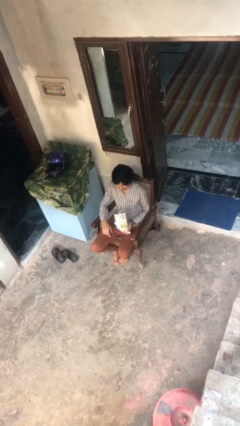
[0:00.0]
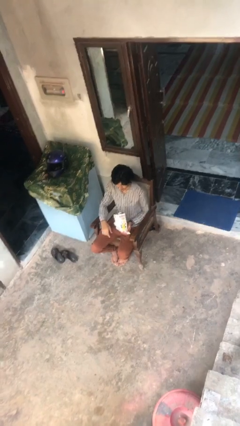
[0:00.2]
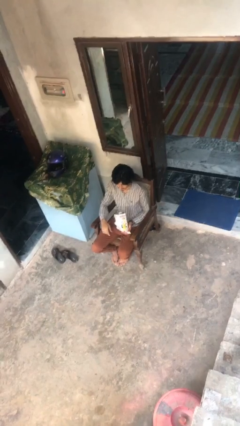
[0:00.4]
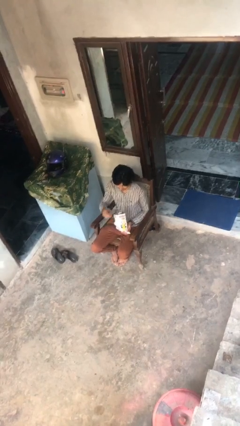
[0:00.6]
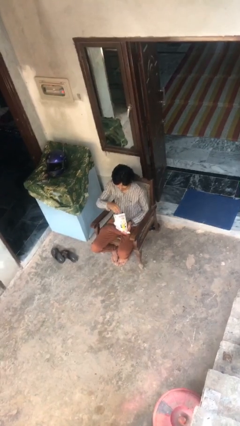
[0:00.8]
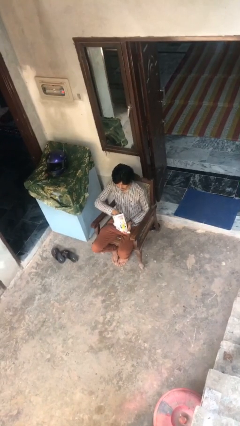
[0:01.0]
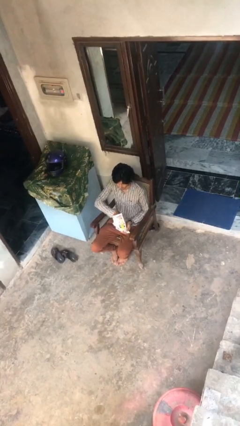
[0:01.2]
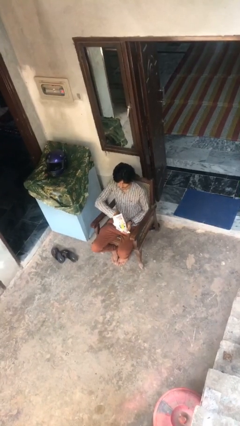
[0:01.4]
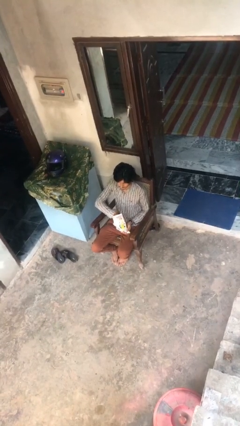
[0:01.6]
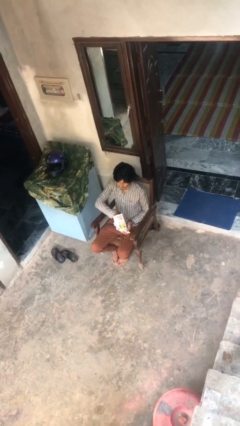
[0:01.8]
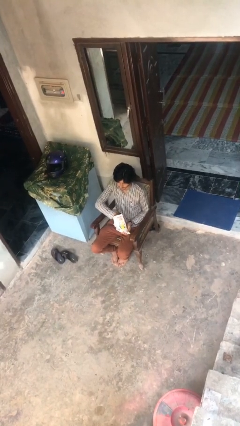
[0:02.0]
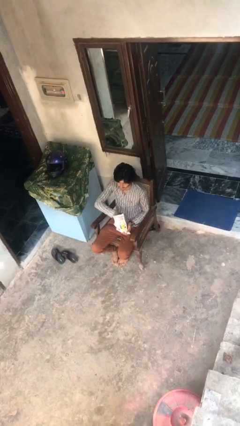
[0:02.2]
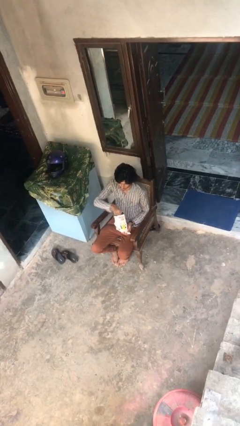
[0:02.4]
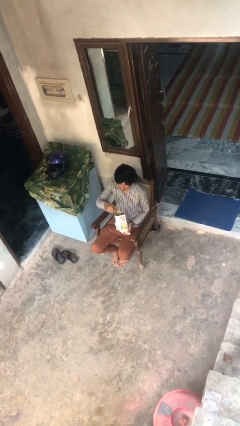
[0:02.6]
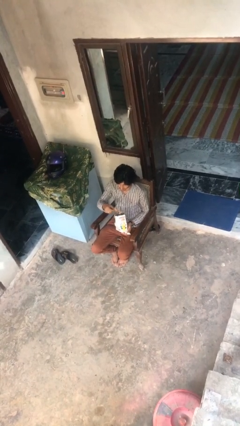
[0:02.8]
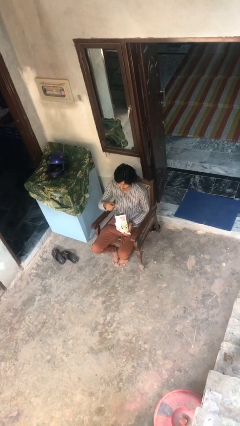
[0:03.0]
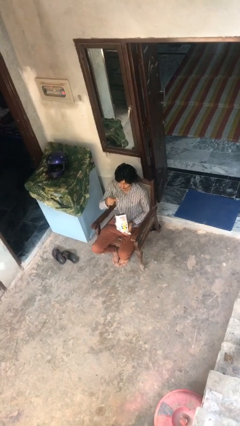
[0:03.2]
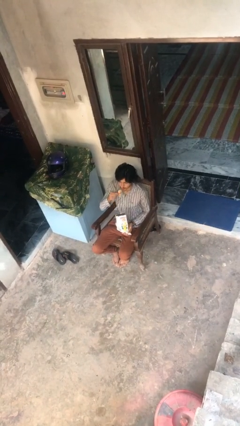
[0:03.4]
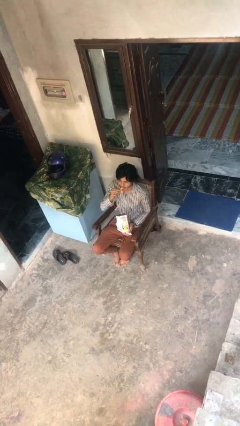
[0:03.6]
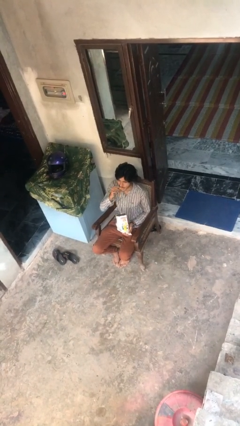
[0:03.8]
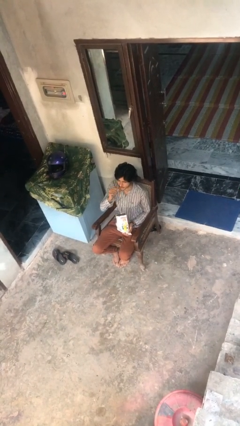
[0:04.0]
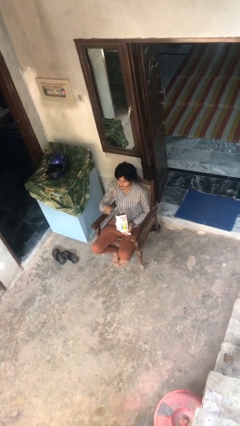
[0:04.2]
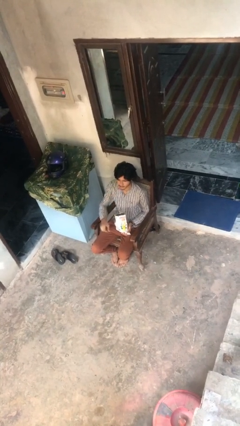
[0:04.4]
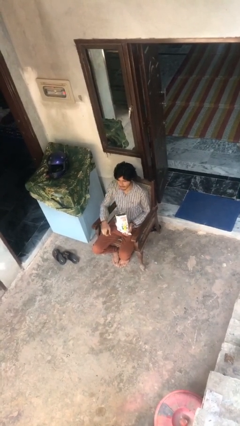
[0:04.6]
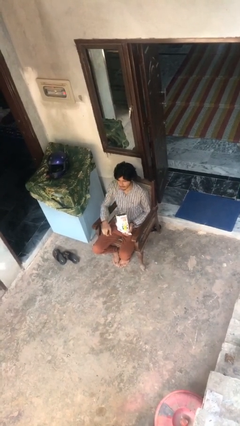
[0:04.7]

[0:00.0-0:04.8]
person eats snack from bag

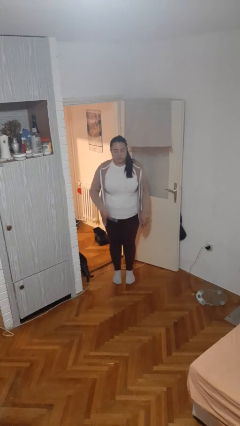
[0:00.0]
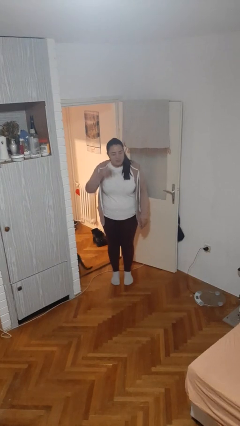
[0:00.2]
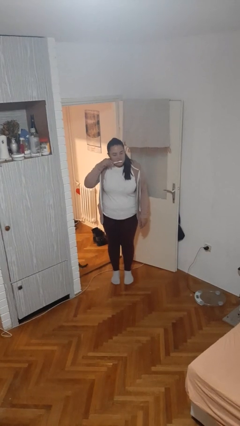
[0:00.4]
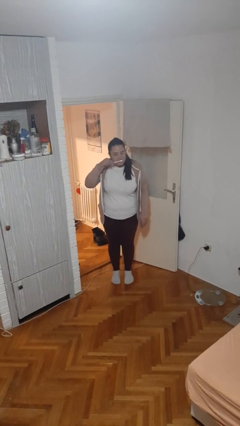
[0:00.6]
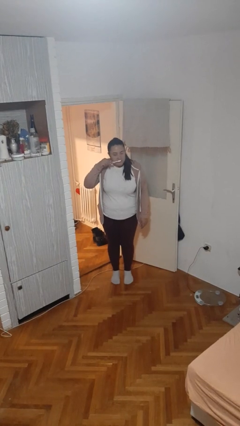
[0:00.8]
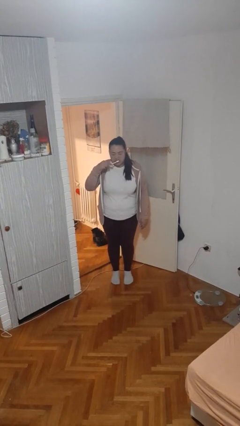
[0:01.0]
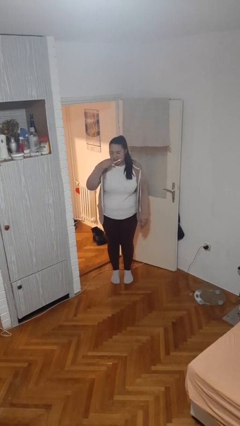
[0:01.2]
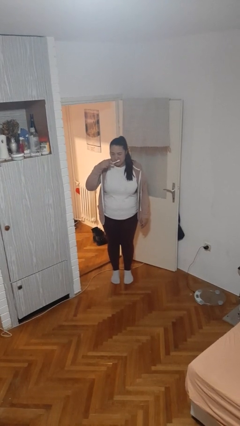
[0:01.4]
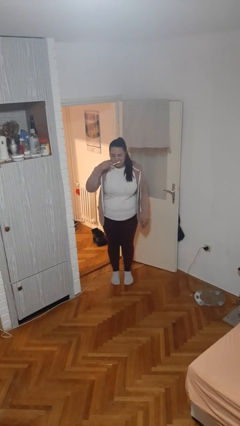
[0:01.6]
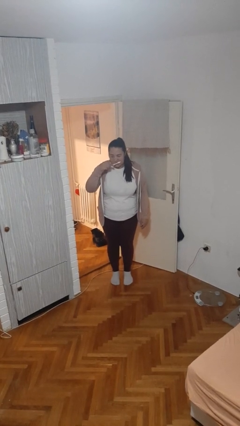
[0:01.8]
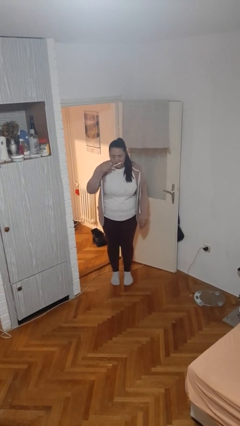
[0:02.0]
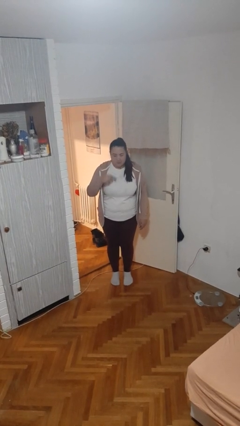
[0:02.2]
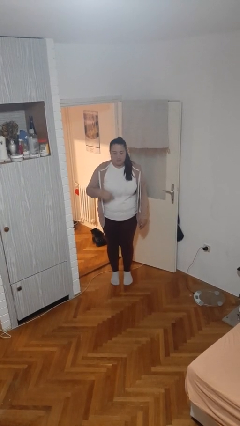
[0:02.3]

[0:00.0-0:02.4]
person brushes hair

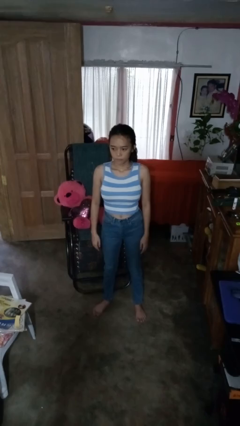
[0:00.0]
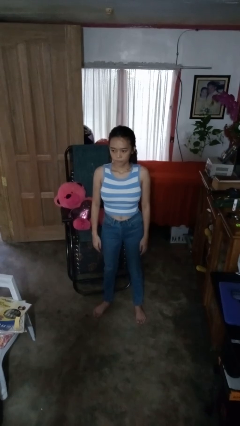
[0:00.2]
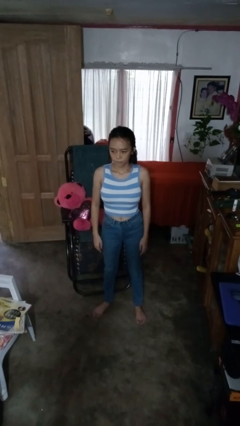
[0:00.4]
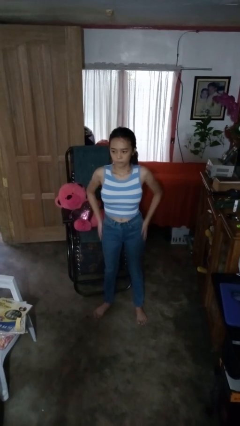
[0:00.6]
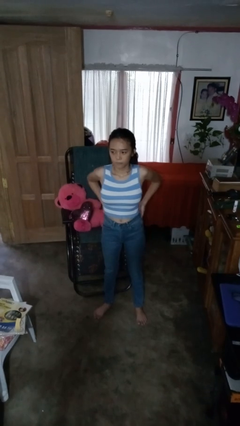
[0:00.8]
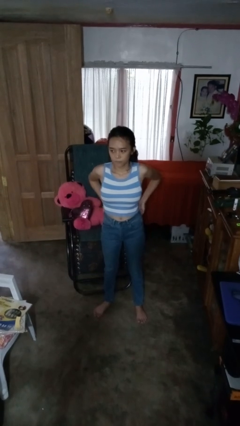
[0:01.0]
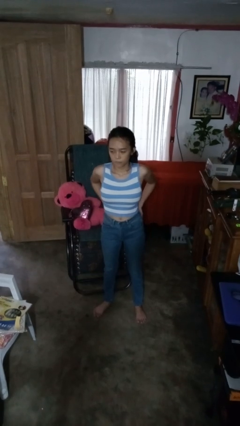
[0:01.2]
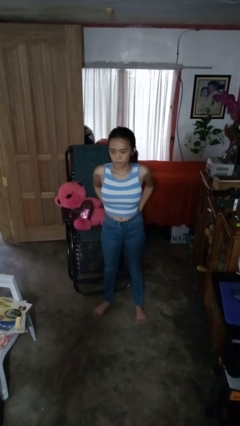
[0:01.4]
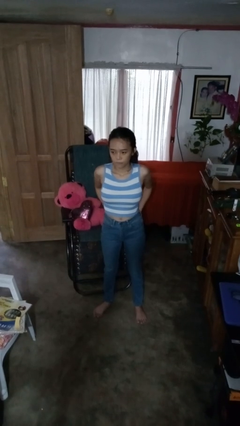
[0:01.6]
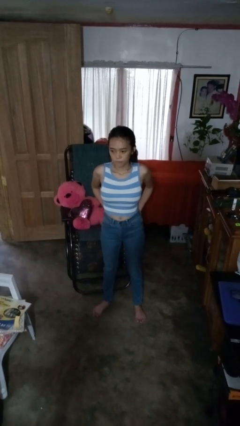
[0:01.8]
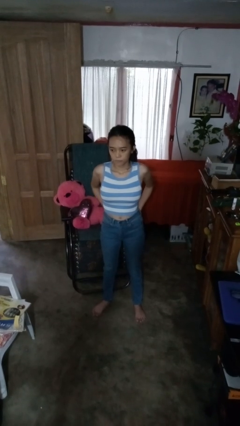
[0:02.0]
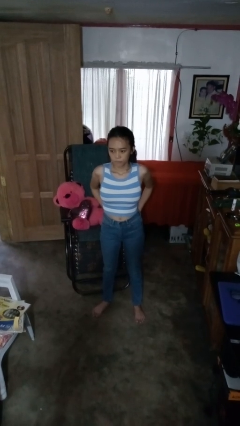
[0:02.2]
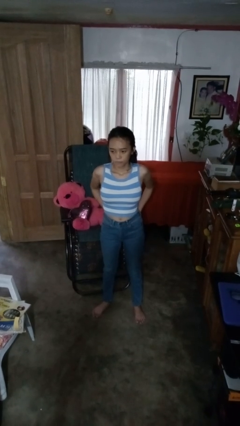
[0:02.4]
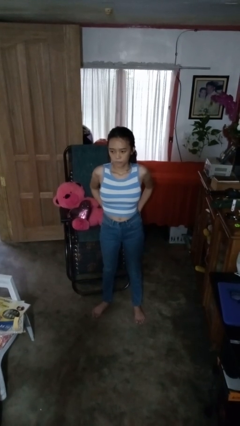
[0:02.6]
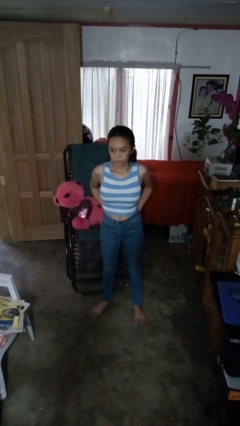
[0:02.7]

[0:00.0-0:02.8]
person puts hands in back pockets

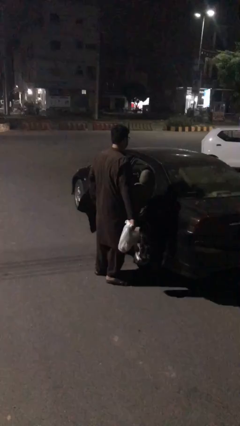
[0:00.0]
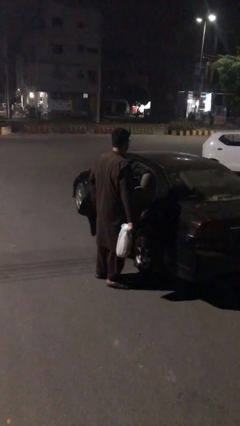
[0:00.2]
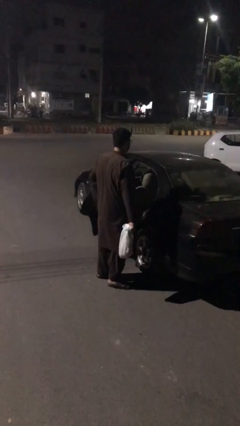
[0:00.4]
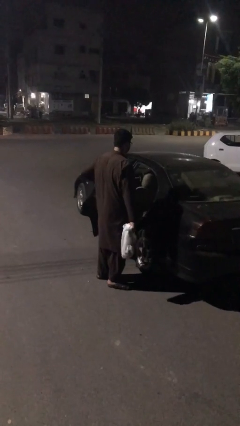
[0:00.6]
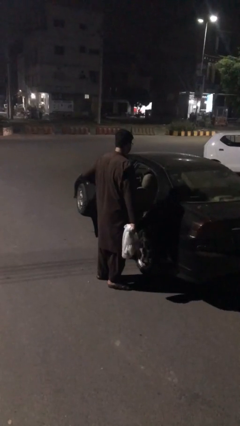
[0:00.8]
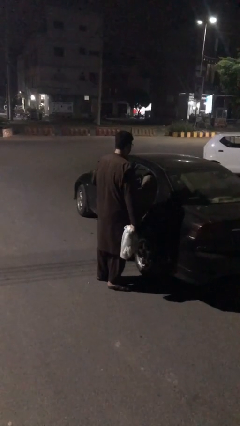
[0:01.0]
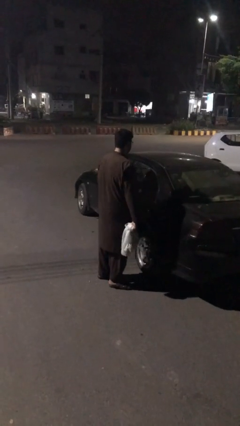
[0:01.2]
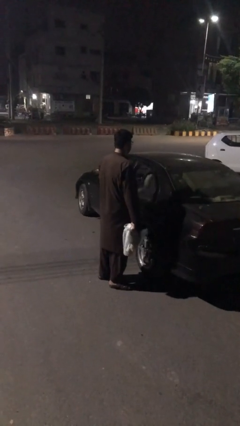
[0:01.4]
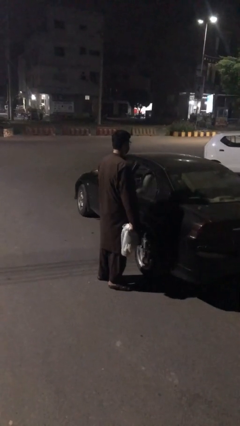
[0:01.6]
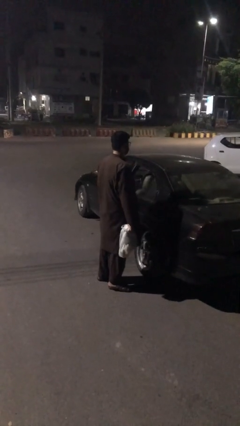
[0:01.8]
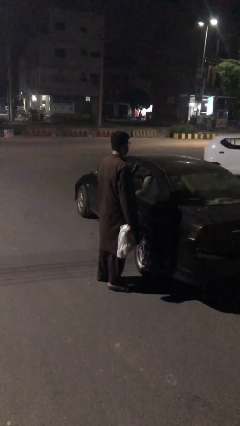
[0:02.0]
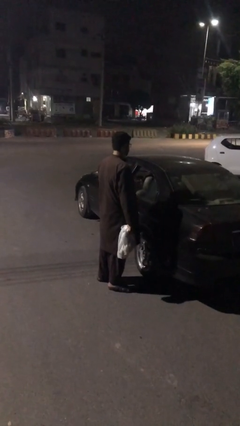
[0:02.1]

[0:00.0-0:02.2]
person closes car door

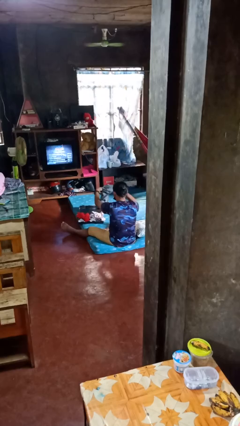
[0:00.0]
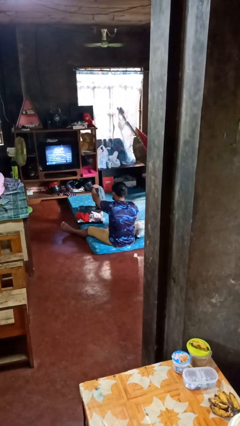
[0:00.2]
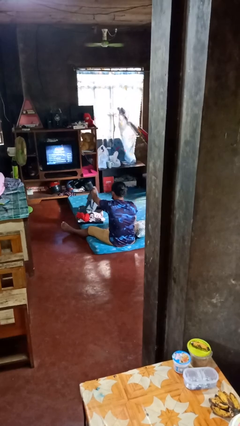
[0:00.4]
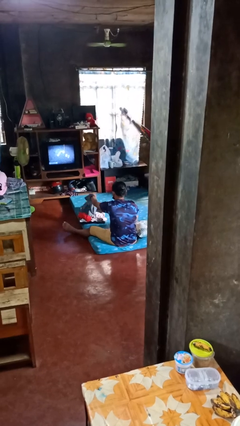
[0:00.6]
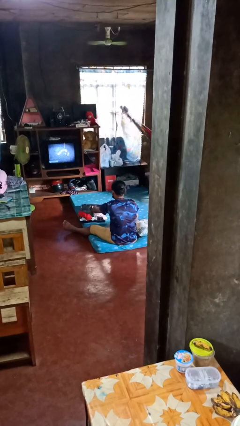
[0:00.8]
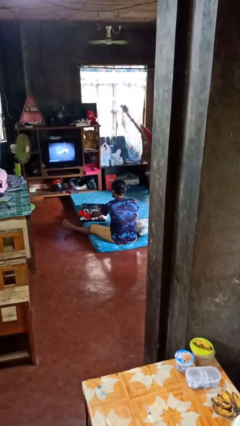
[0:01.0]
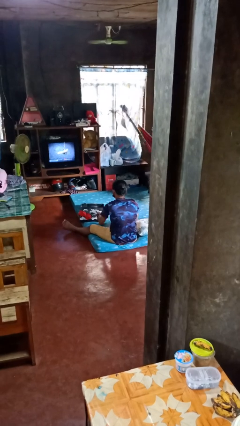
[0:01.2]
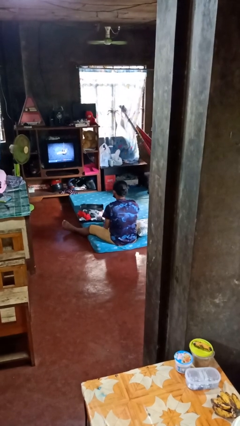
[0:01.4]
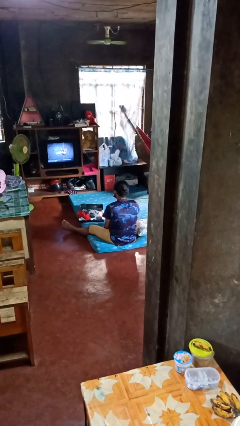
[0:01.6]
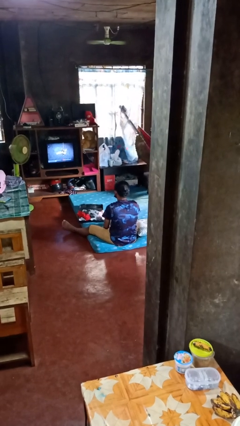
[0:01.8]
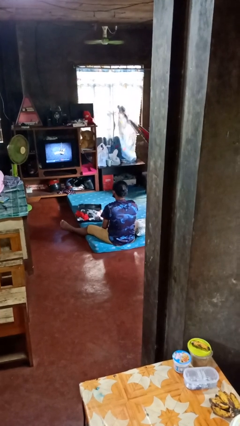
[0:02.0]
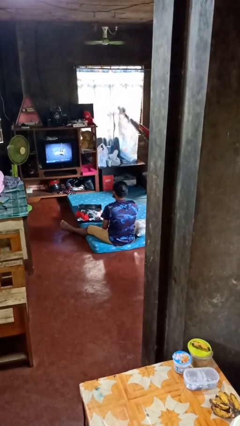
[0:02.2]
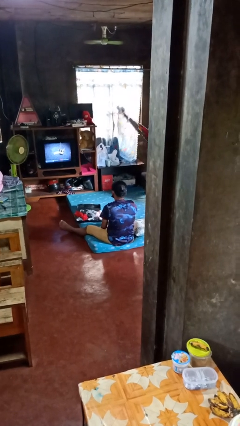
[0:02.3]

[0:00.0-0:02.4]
person loads clothes into suitcase

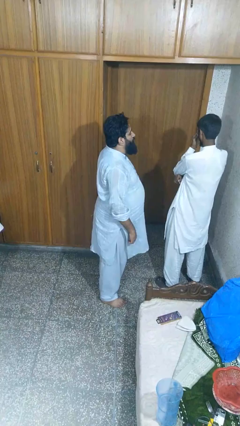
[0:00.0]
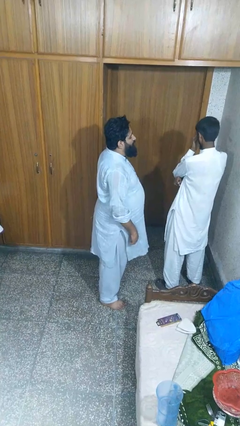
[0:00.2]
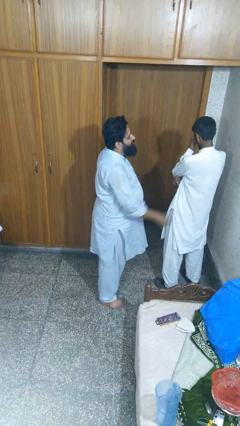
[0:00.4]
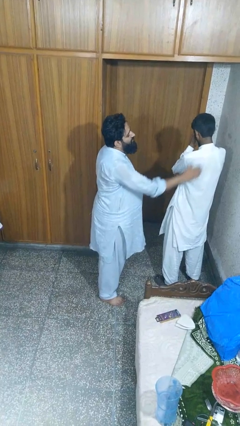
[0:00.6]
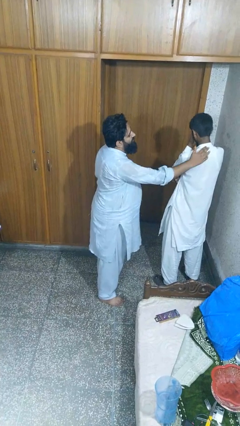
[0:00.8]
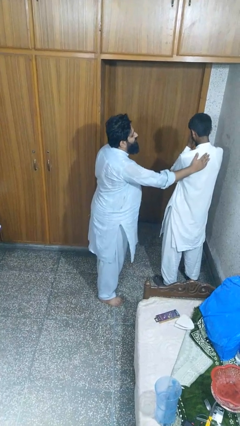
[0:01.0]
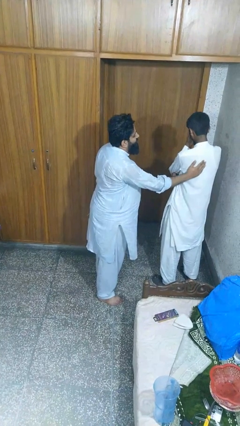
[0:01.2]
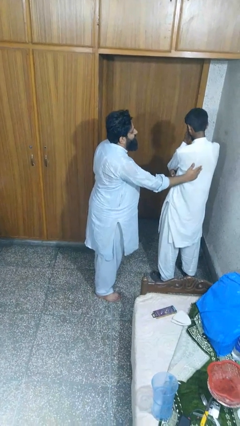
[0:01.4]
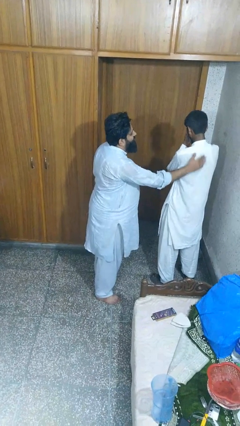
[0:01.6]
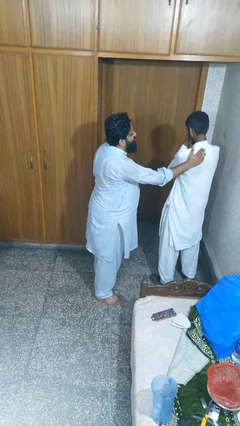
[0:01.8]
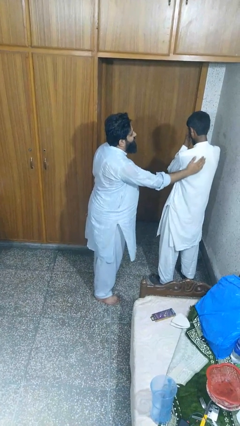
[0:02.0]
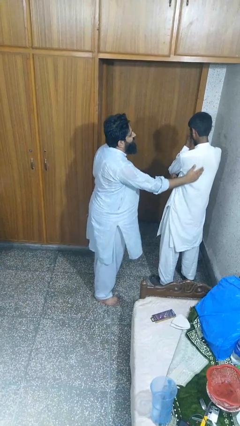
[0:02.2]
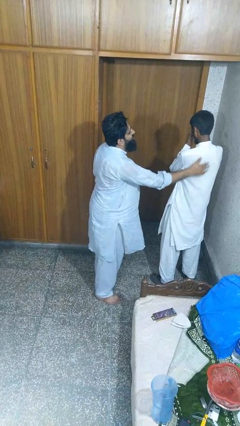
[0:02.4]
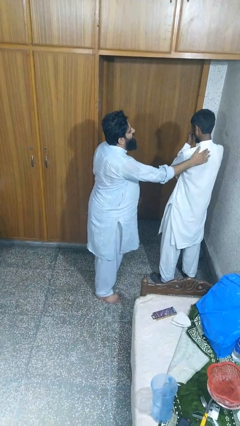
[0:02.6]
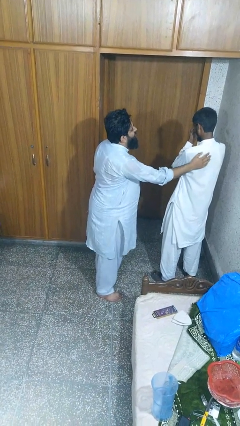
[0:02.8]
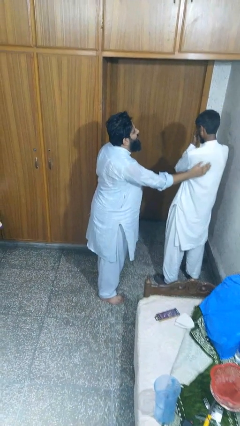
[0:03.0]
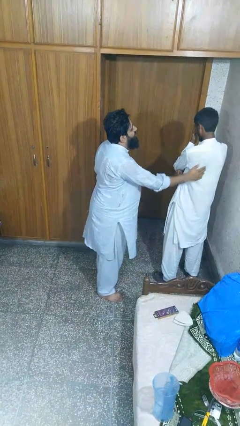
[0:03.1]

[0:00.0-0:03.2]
person touches back of person
